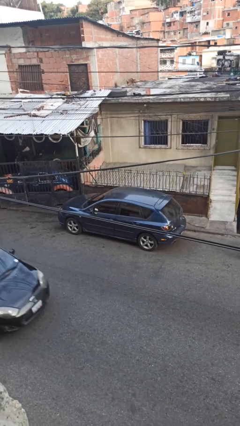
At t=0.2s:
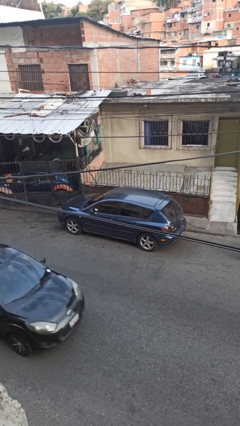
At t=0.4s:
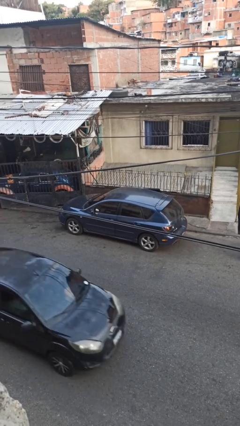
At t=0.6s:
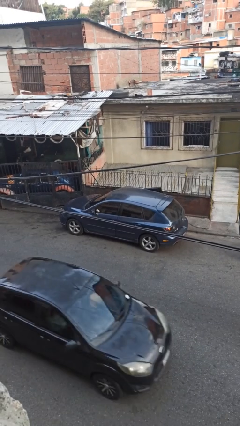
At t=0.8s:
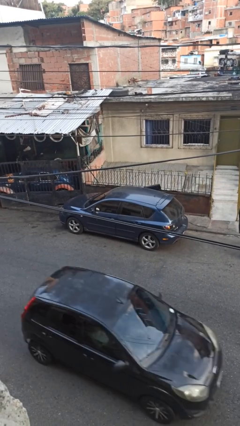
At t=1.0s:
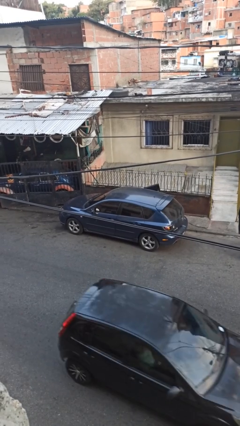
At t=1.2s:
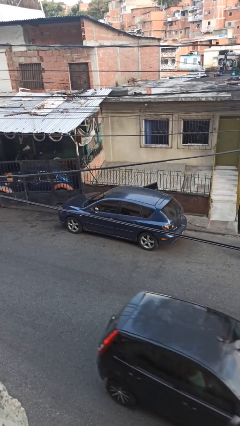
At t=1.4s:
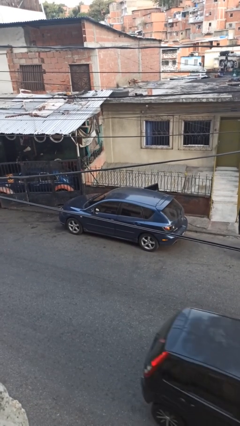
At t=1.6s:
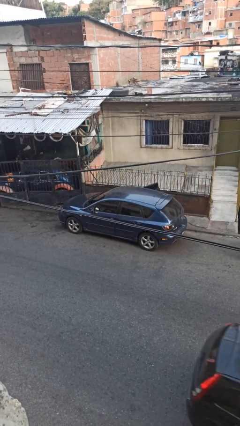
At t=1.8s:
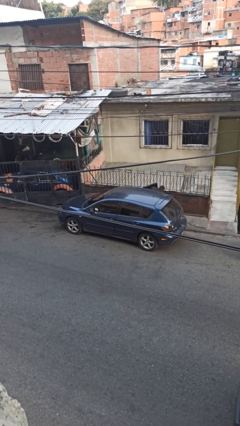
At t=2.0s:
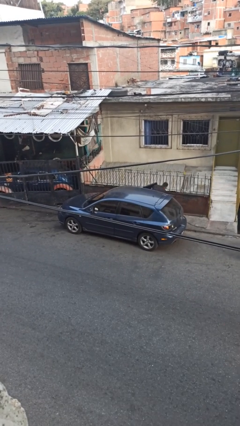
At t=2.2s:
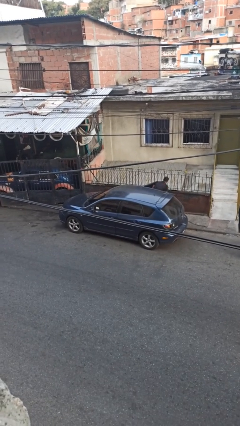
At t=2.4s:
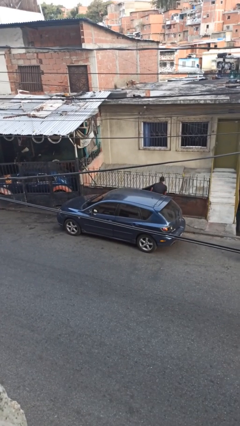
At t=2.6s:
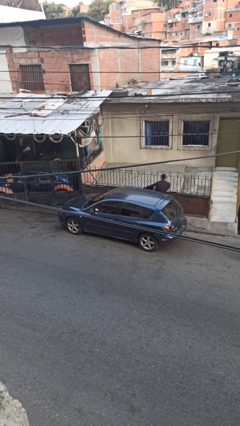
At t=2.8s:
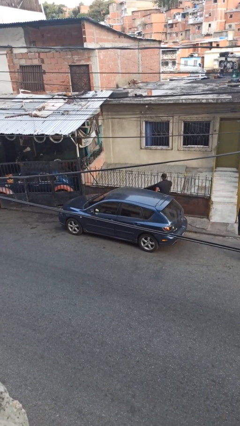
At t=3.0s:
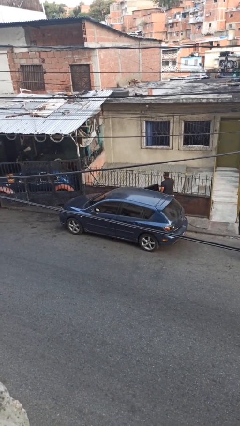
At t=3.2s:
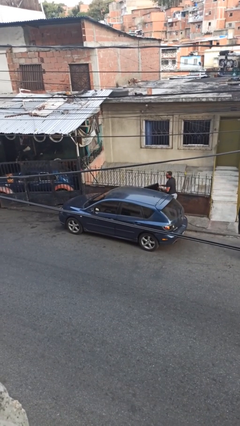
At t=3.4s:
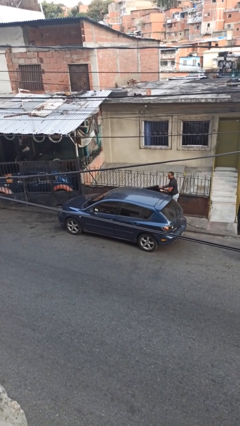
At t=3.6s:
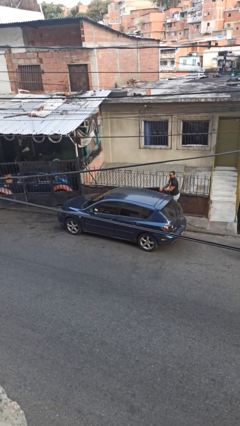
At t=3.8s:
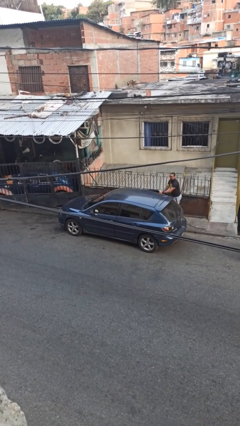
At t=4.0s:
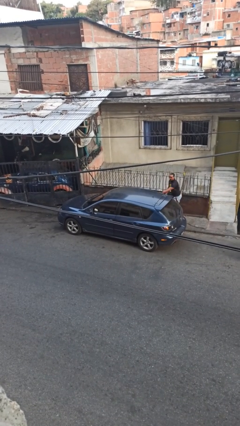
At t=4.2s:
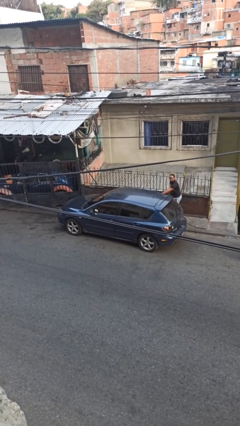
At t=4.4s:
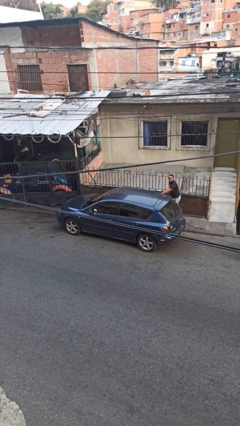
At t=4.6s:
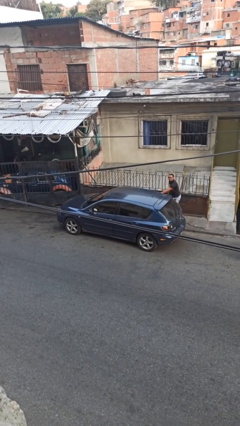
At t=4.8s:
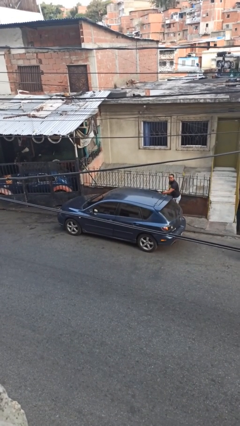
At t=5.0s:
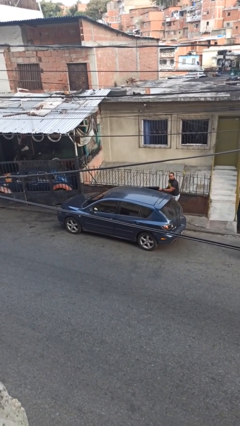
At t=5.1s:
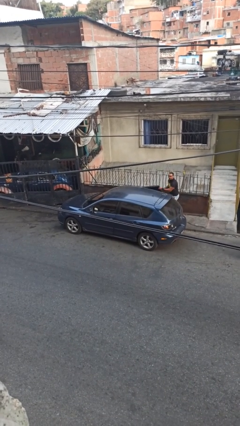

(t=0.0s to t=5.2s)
car drops off person

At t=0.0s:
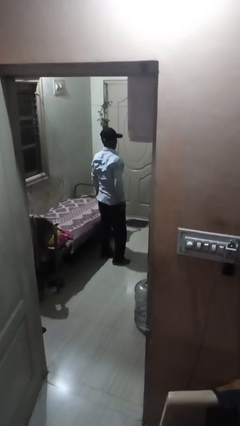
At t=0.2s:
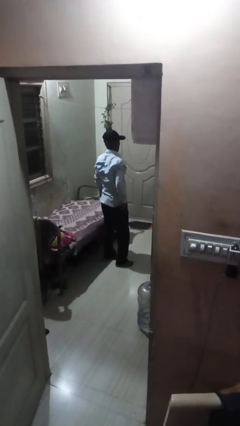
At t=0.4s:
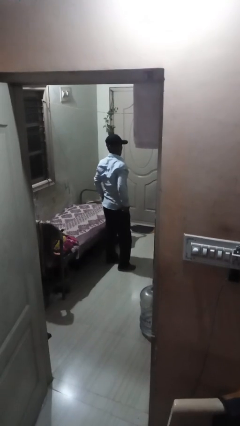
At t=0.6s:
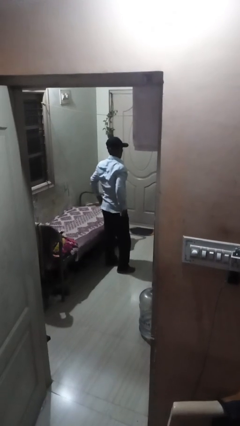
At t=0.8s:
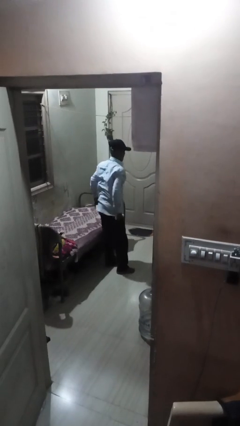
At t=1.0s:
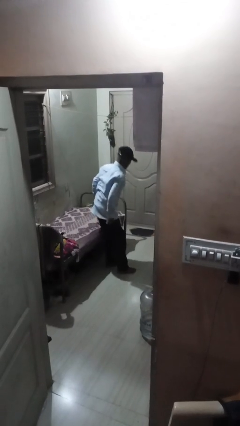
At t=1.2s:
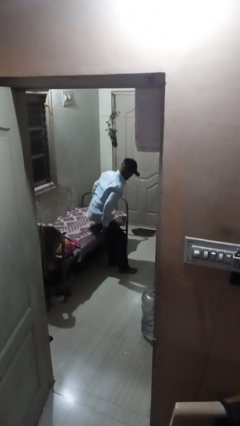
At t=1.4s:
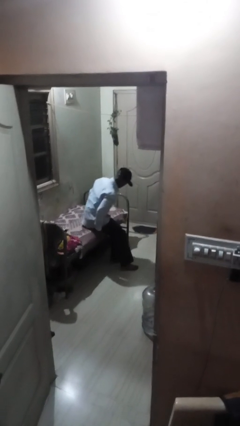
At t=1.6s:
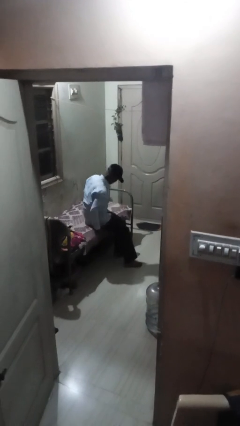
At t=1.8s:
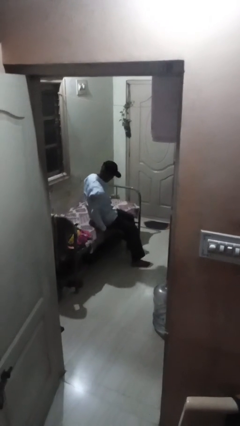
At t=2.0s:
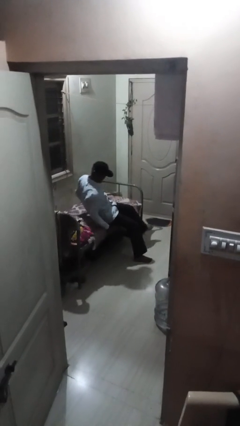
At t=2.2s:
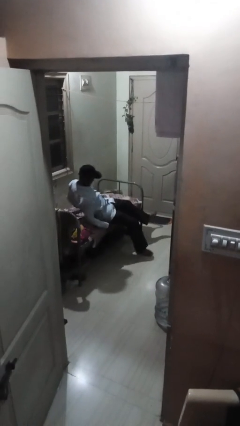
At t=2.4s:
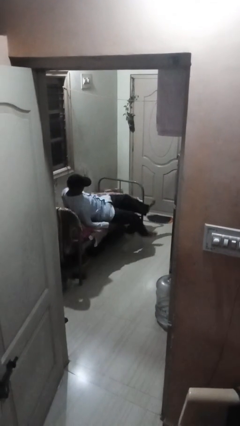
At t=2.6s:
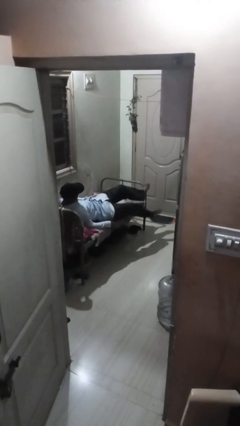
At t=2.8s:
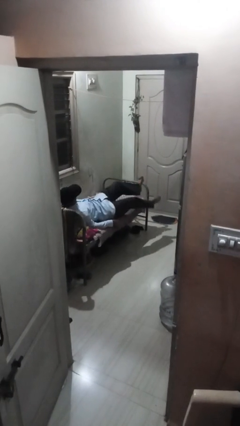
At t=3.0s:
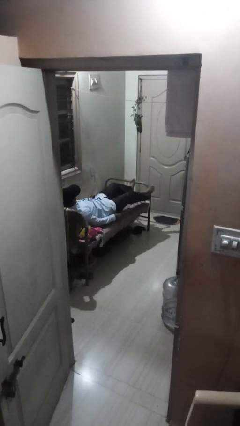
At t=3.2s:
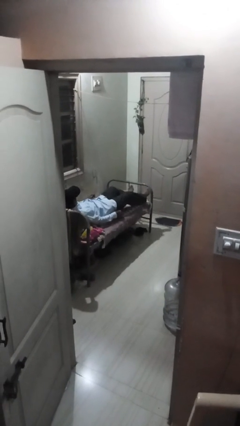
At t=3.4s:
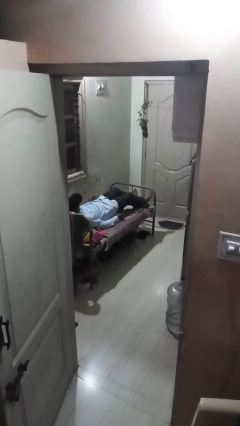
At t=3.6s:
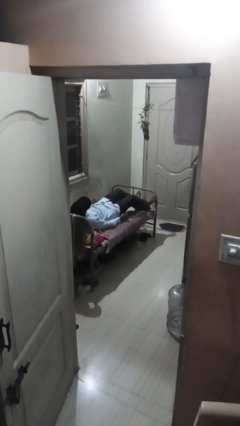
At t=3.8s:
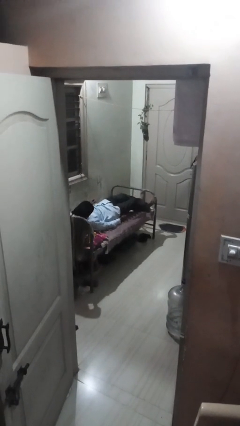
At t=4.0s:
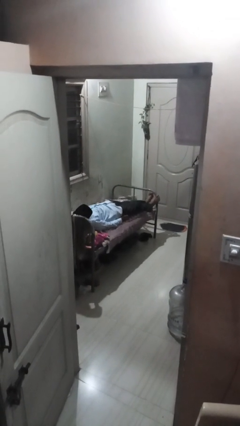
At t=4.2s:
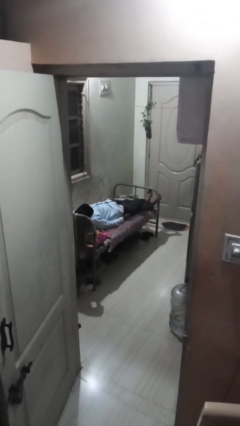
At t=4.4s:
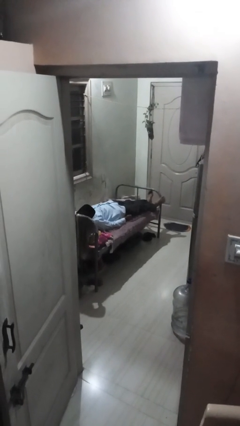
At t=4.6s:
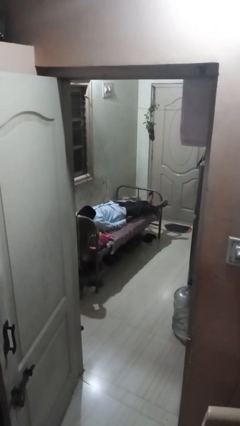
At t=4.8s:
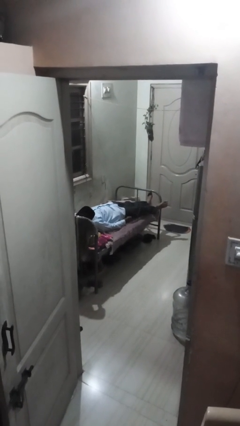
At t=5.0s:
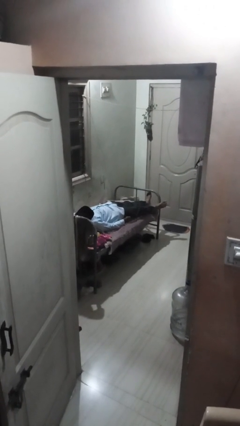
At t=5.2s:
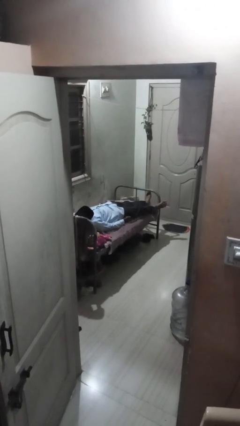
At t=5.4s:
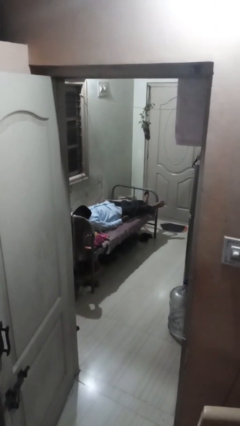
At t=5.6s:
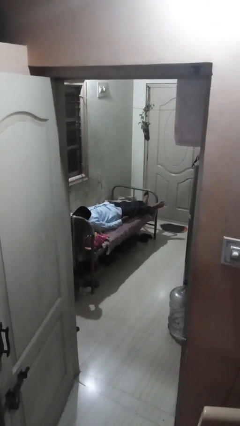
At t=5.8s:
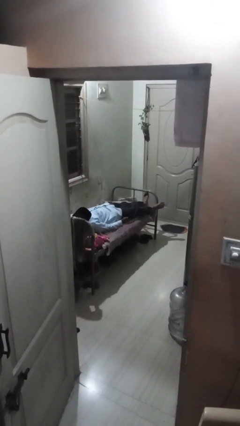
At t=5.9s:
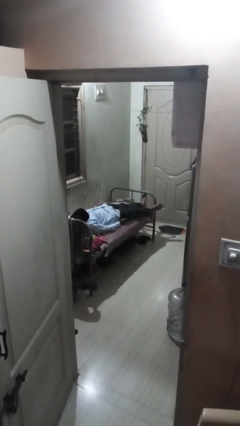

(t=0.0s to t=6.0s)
person lies down on bed

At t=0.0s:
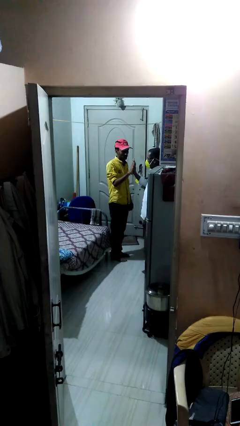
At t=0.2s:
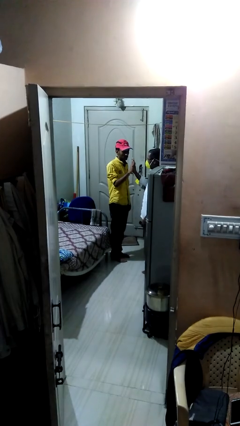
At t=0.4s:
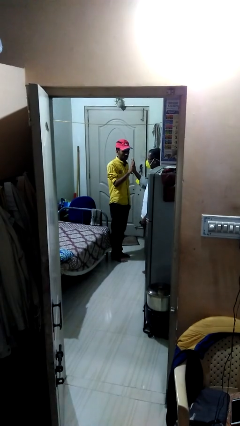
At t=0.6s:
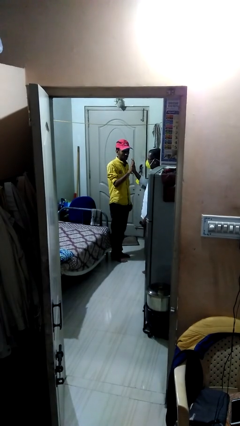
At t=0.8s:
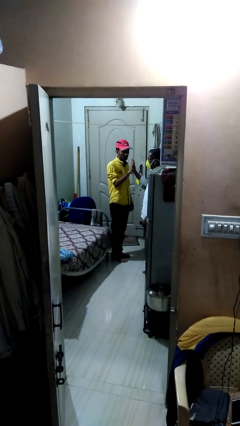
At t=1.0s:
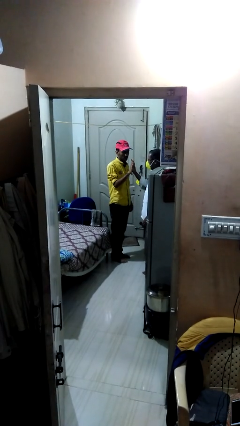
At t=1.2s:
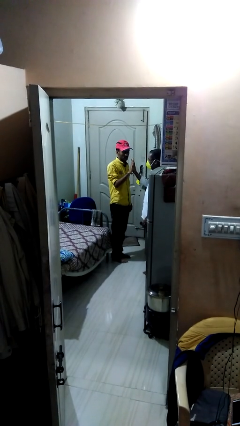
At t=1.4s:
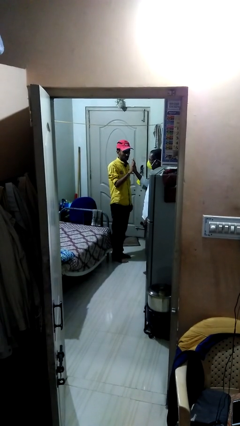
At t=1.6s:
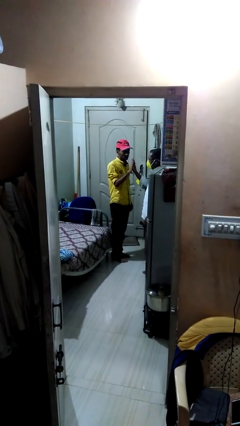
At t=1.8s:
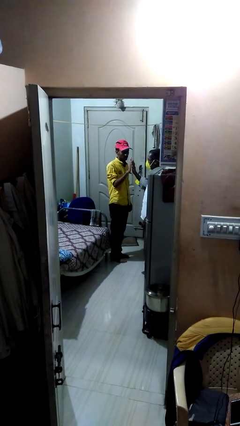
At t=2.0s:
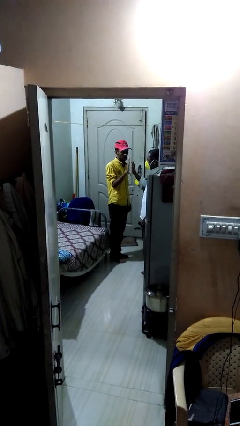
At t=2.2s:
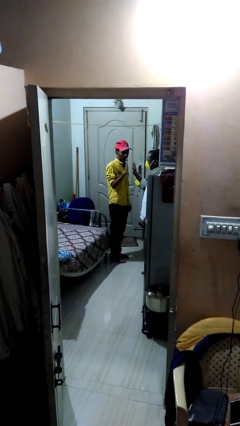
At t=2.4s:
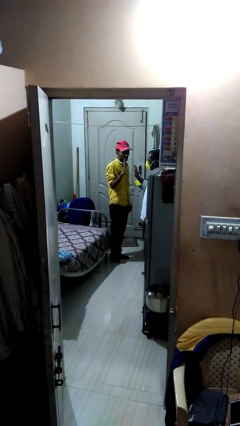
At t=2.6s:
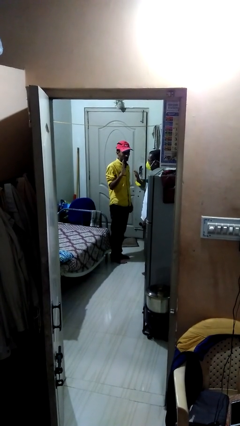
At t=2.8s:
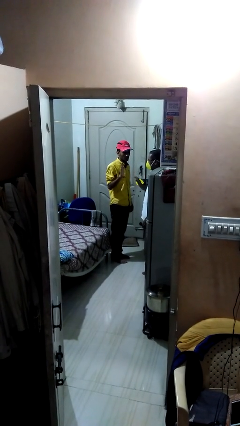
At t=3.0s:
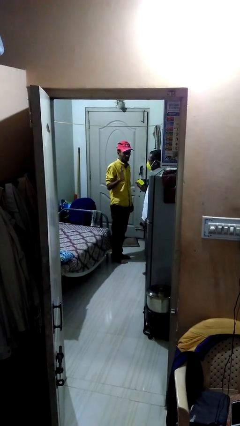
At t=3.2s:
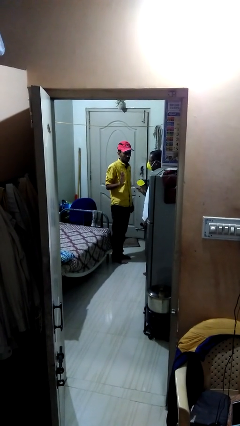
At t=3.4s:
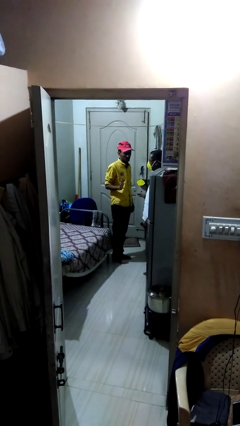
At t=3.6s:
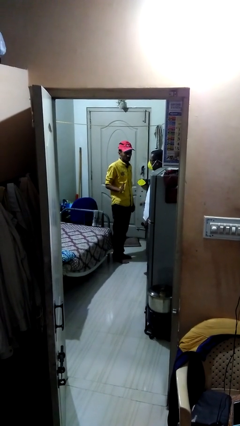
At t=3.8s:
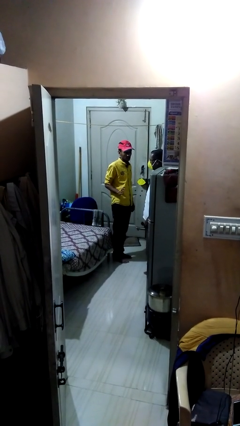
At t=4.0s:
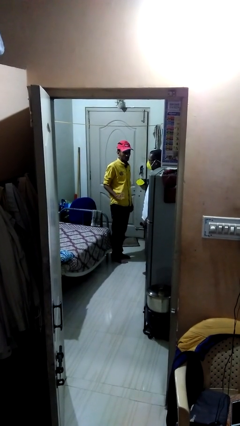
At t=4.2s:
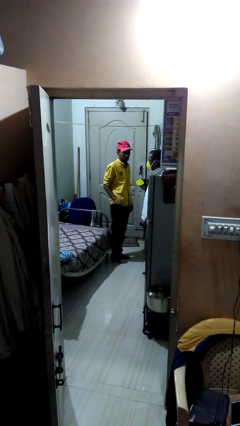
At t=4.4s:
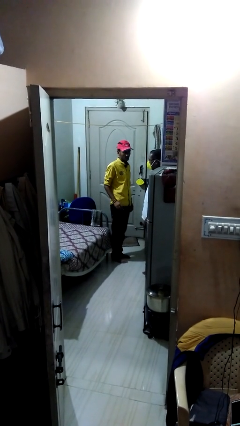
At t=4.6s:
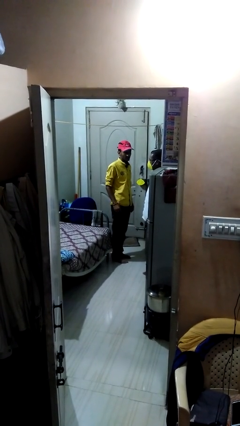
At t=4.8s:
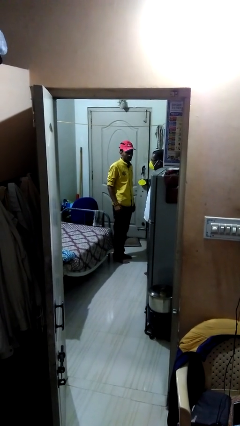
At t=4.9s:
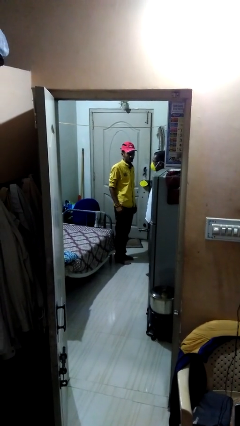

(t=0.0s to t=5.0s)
person highfives hand

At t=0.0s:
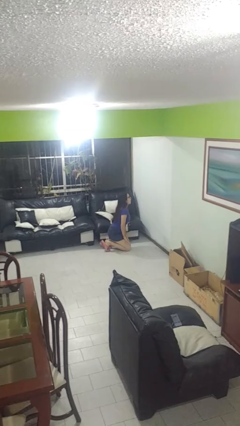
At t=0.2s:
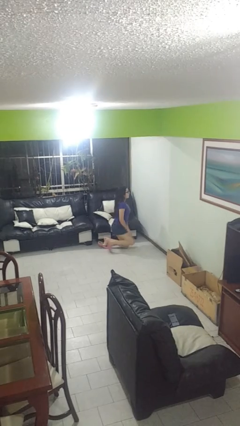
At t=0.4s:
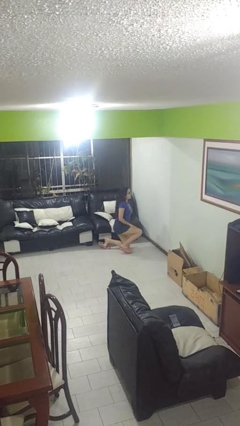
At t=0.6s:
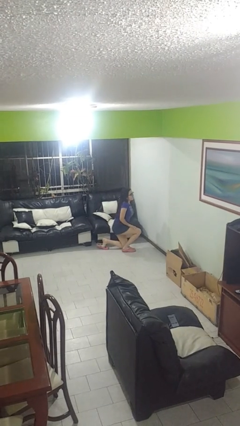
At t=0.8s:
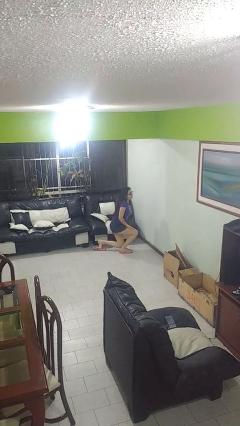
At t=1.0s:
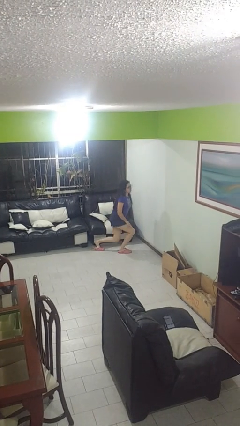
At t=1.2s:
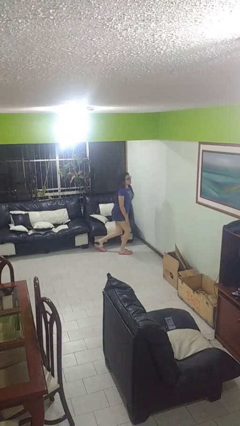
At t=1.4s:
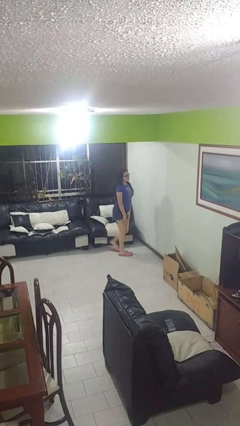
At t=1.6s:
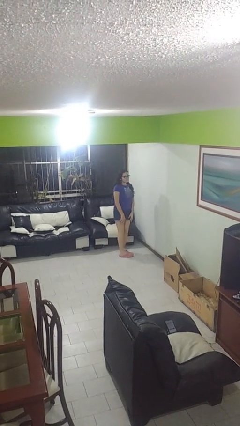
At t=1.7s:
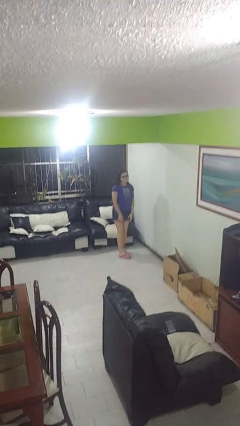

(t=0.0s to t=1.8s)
person stands up from floor
